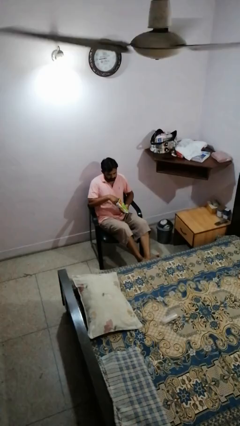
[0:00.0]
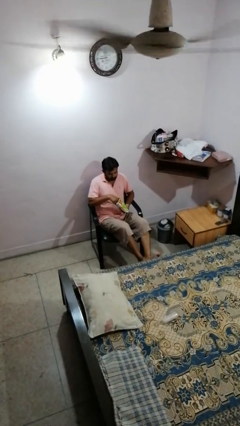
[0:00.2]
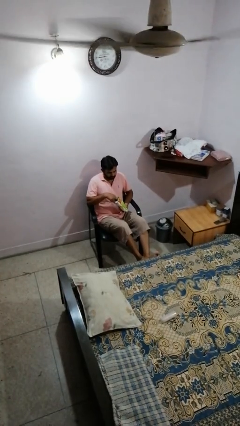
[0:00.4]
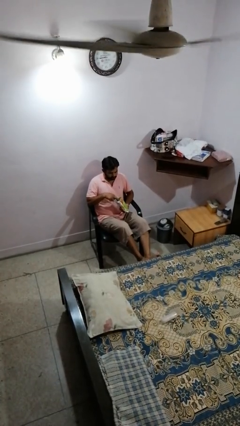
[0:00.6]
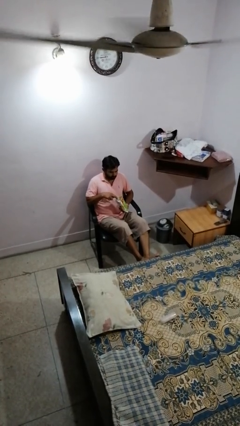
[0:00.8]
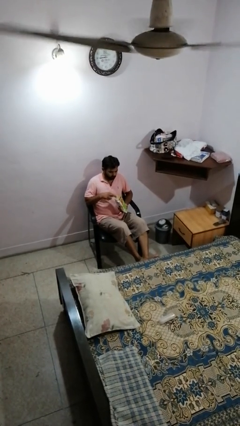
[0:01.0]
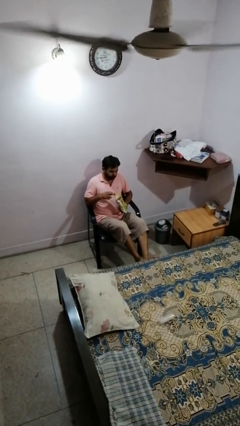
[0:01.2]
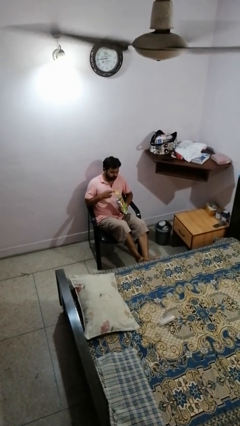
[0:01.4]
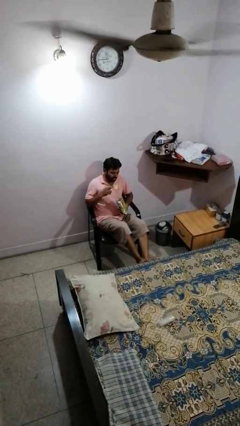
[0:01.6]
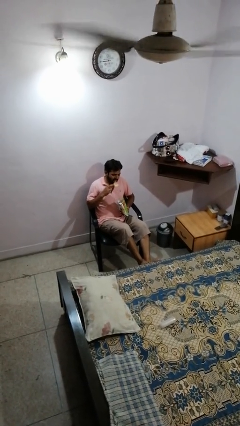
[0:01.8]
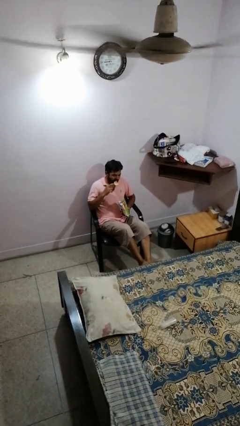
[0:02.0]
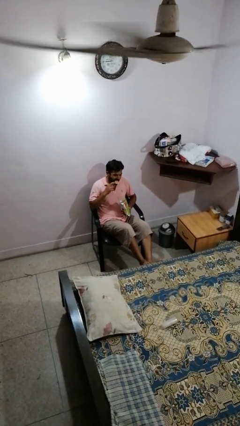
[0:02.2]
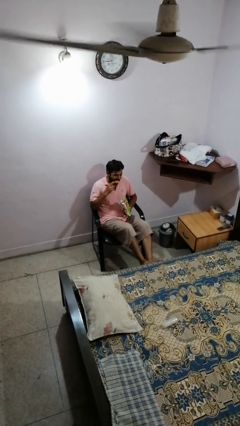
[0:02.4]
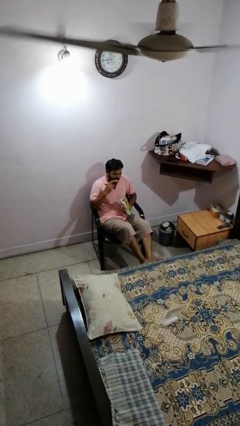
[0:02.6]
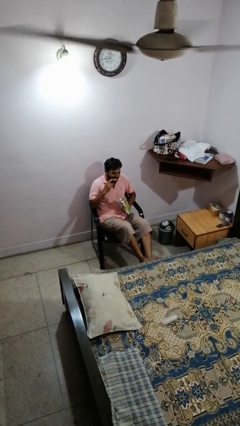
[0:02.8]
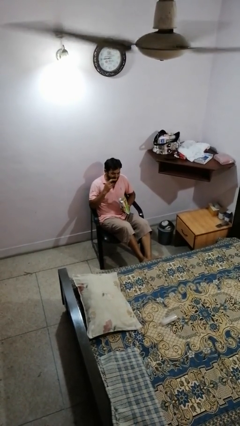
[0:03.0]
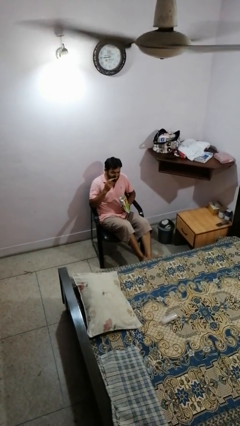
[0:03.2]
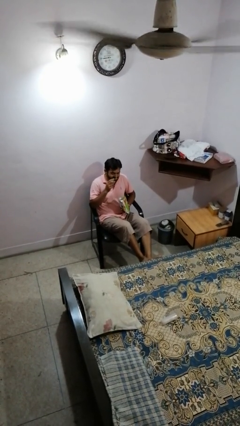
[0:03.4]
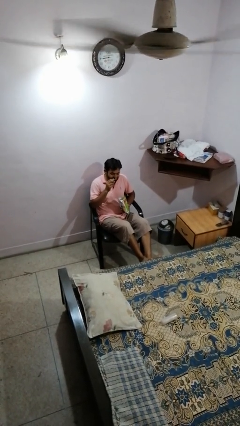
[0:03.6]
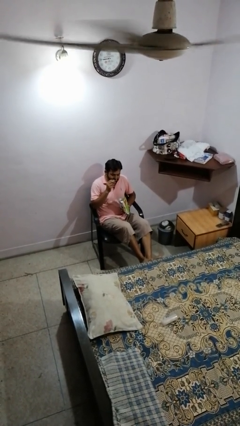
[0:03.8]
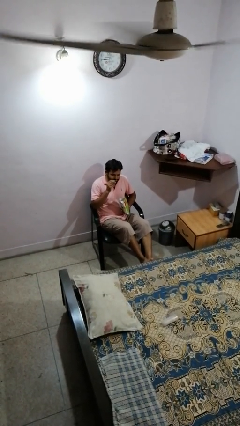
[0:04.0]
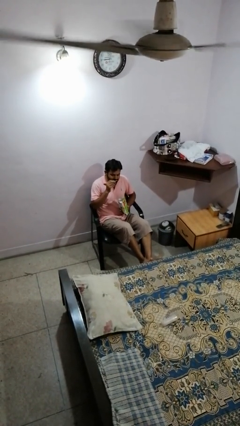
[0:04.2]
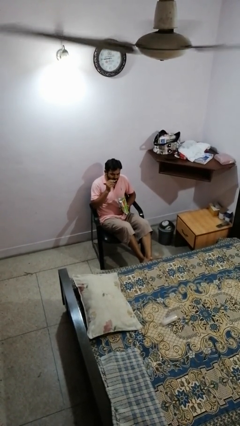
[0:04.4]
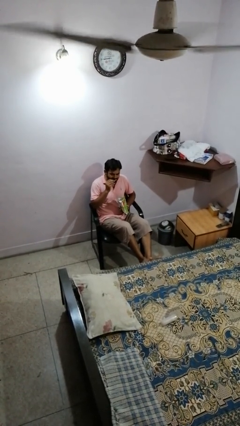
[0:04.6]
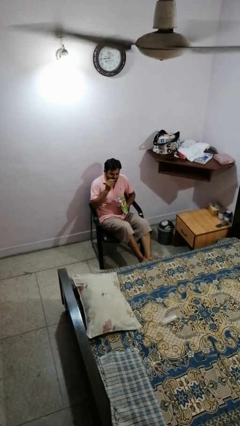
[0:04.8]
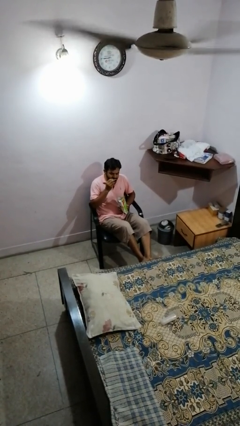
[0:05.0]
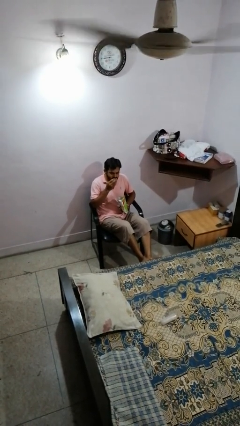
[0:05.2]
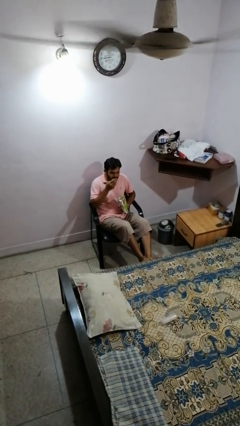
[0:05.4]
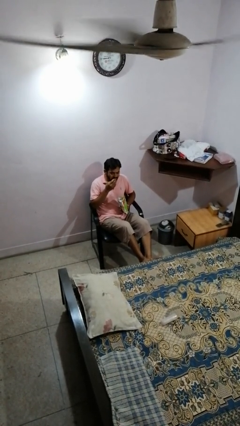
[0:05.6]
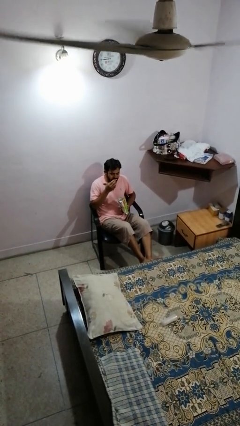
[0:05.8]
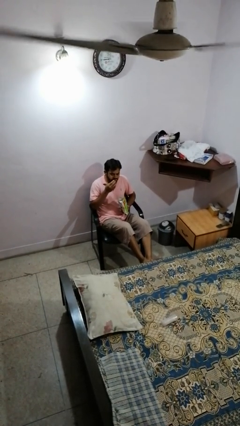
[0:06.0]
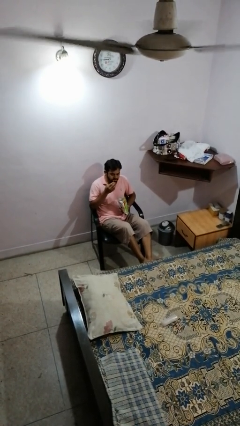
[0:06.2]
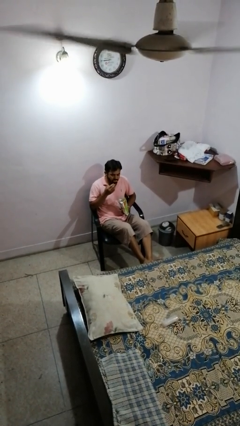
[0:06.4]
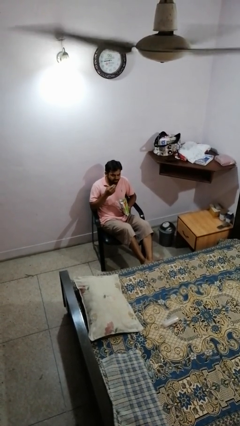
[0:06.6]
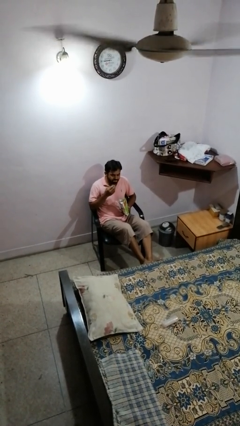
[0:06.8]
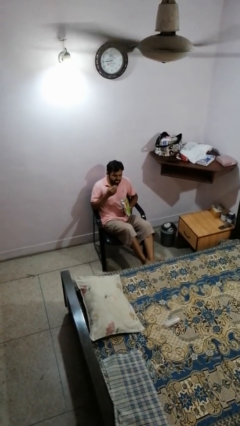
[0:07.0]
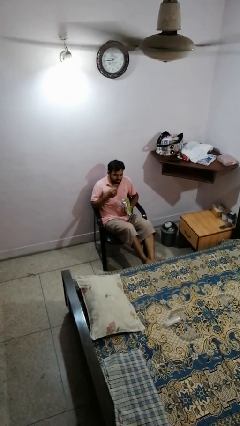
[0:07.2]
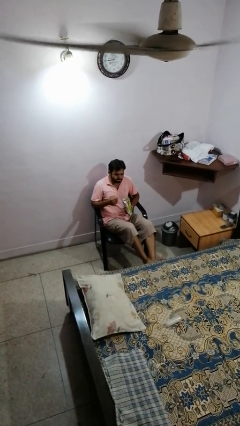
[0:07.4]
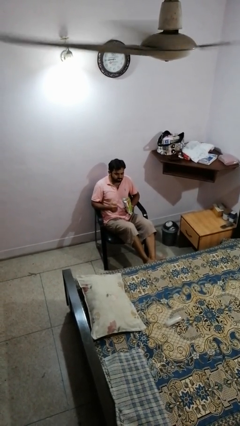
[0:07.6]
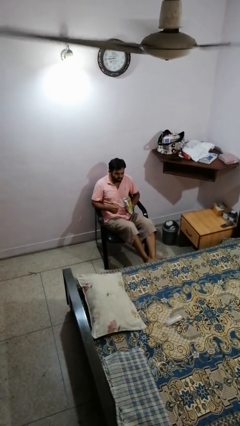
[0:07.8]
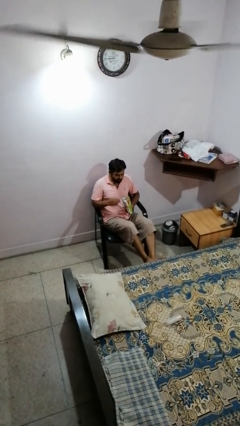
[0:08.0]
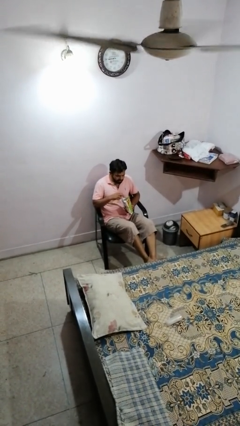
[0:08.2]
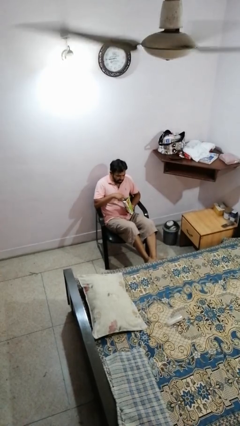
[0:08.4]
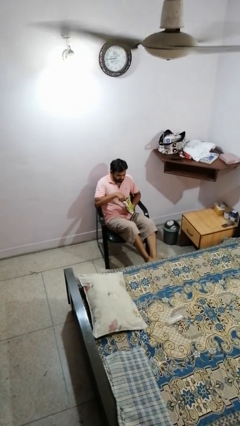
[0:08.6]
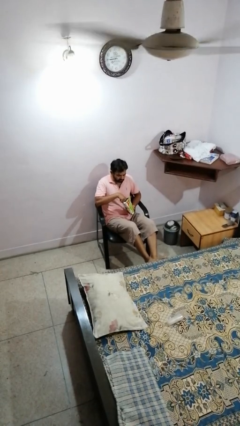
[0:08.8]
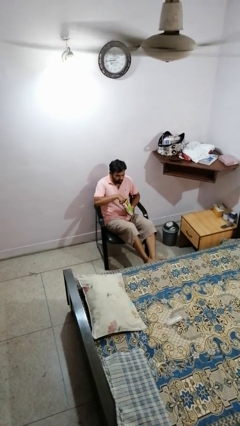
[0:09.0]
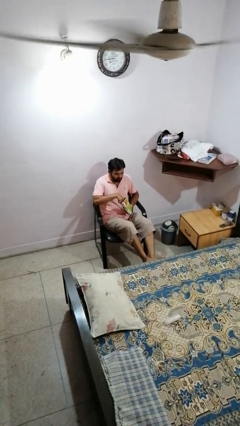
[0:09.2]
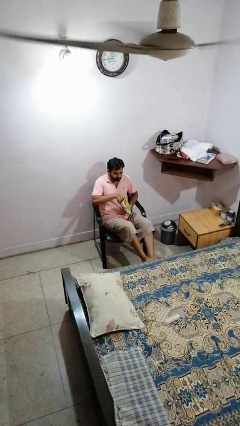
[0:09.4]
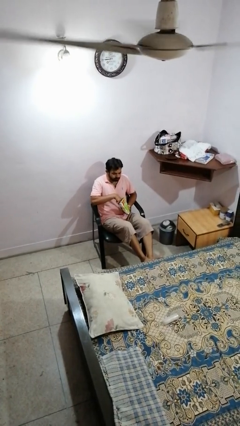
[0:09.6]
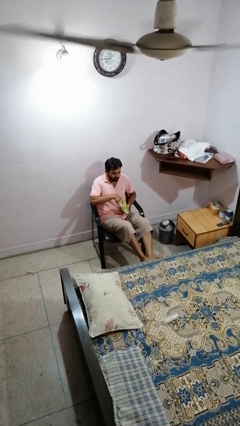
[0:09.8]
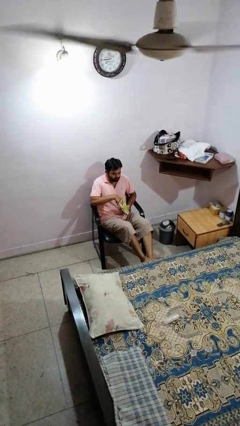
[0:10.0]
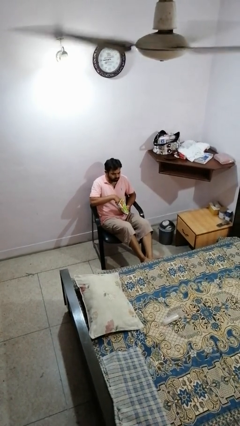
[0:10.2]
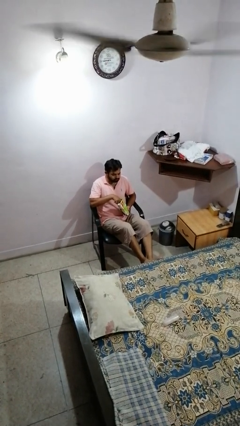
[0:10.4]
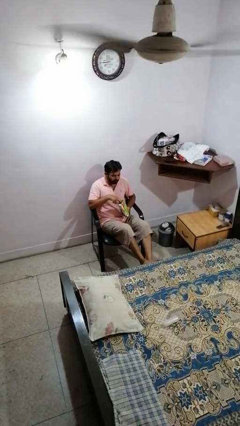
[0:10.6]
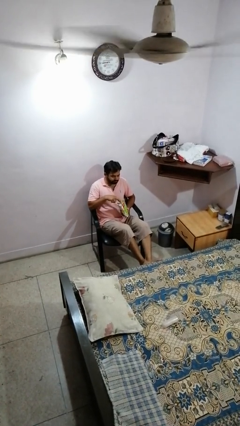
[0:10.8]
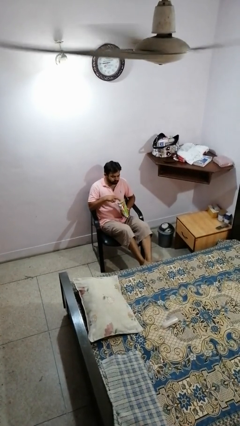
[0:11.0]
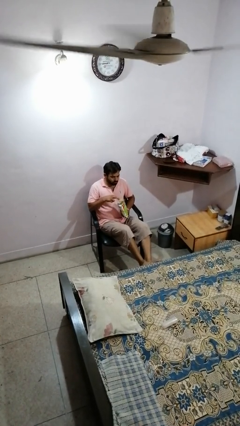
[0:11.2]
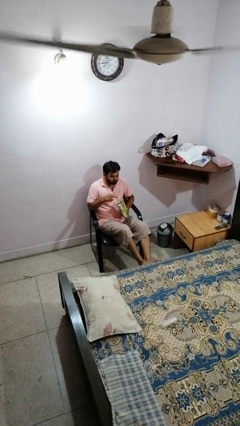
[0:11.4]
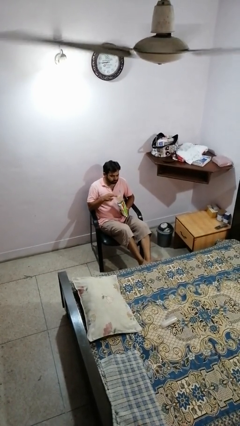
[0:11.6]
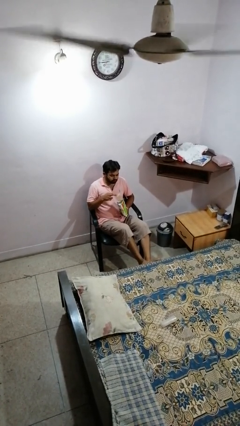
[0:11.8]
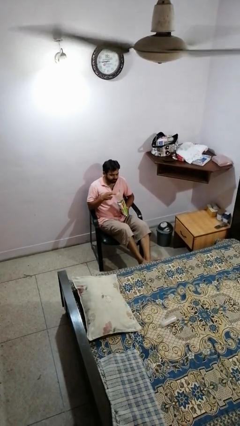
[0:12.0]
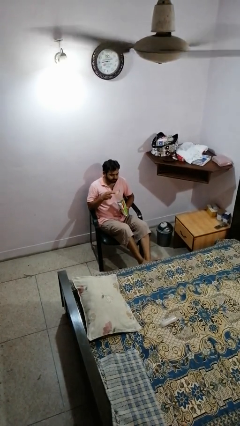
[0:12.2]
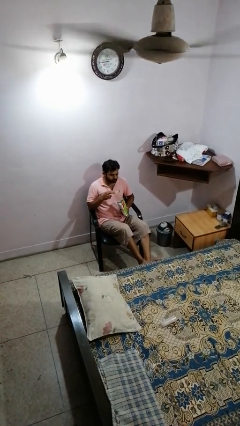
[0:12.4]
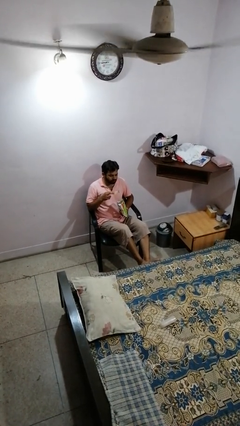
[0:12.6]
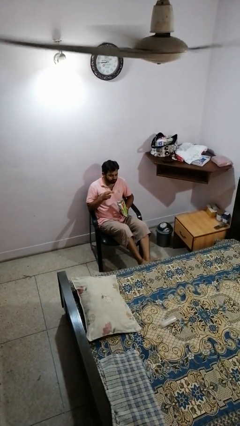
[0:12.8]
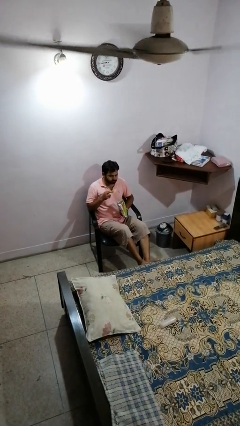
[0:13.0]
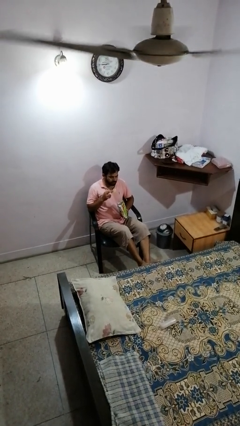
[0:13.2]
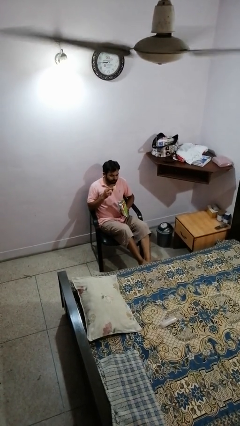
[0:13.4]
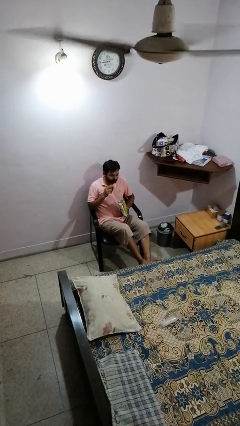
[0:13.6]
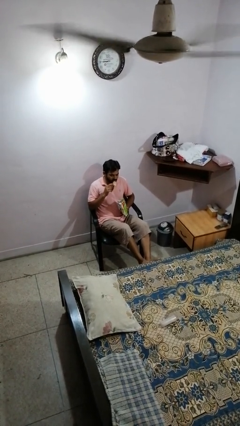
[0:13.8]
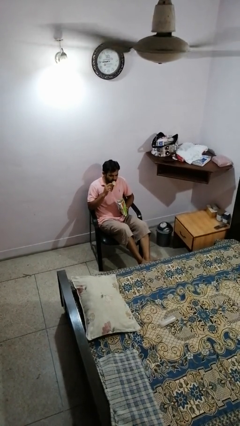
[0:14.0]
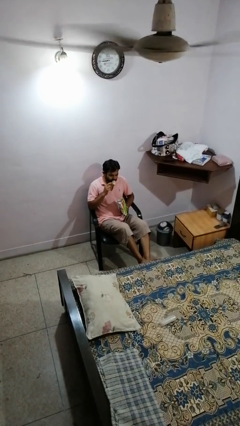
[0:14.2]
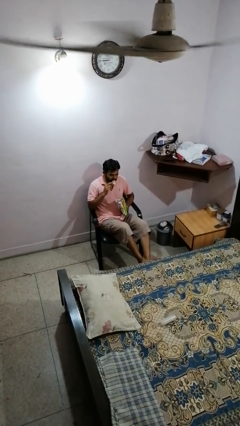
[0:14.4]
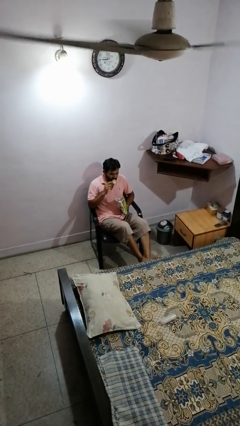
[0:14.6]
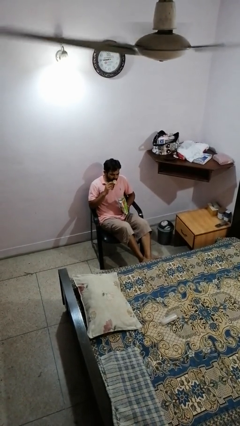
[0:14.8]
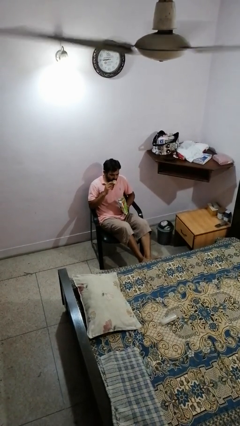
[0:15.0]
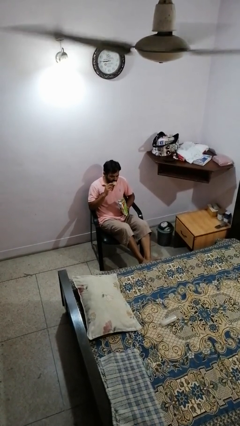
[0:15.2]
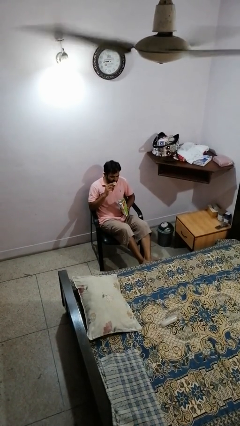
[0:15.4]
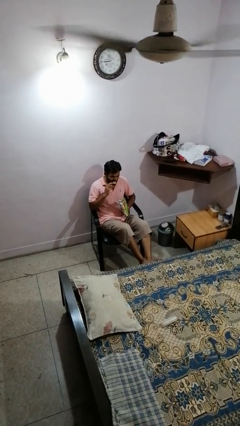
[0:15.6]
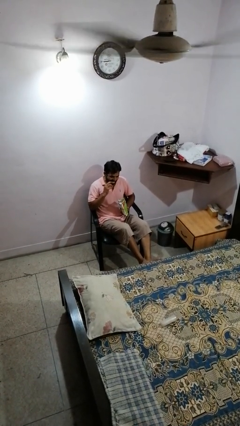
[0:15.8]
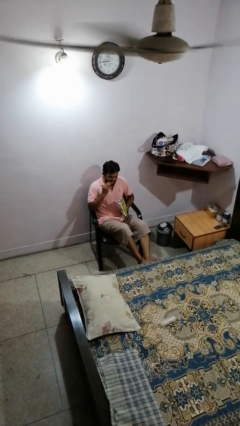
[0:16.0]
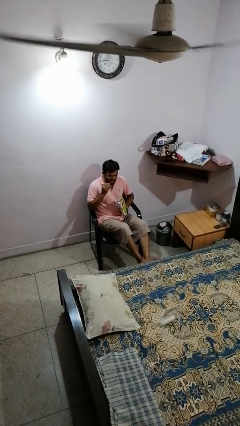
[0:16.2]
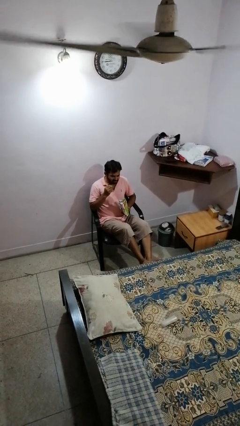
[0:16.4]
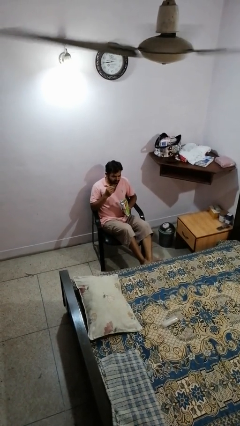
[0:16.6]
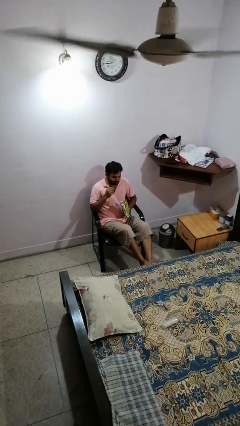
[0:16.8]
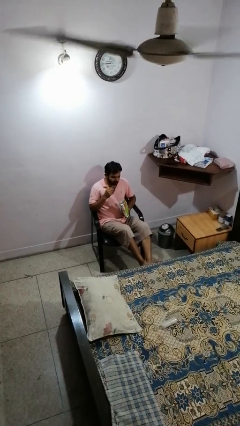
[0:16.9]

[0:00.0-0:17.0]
person eats snack from bag

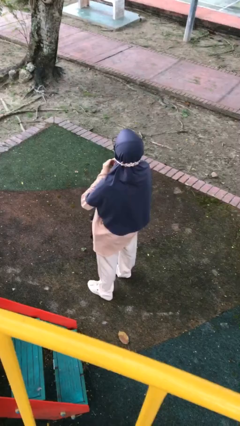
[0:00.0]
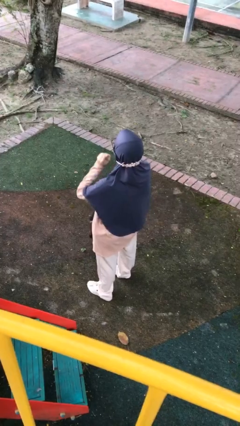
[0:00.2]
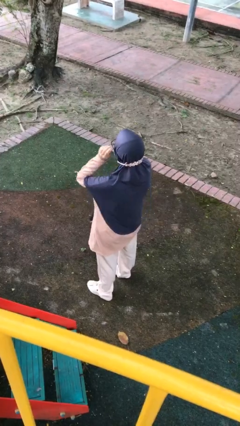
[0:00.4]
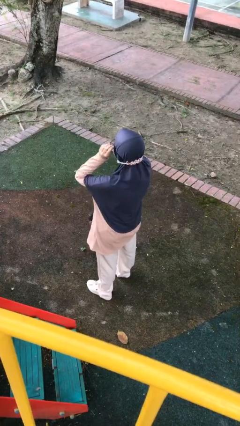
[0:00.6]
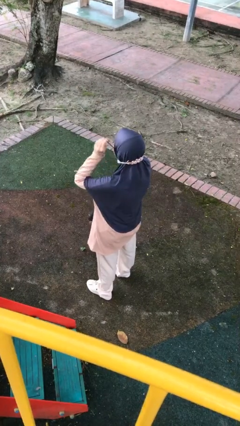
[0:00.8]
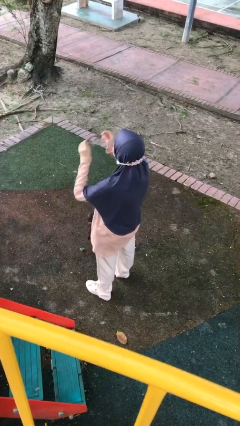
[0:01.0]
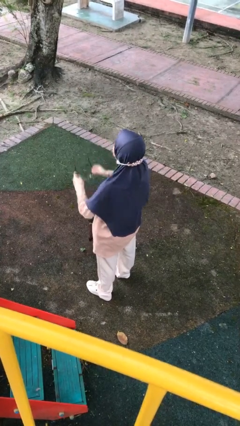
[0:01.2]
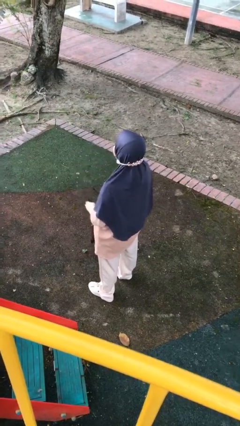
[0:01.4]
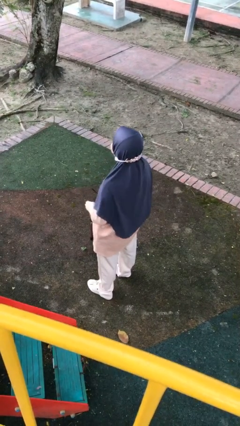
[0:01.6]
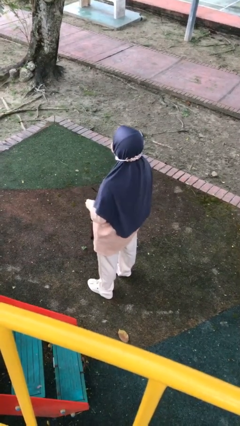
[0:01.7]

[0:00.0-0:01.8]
person takes off glasses
